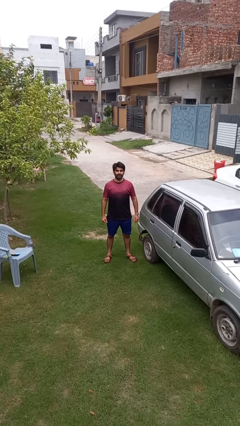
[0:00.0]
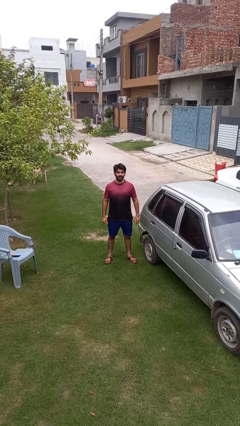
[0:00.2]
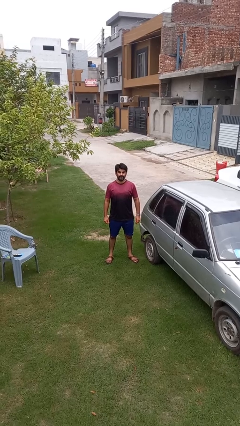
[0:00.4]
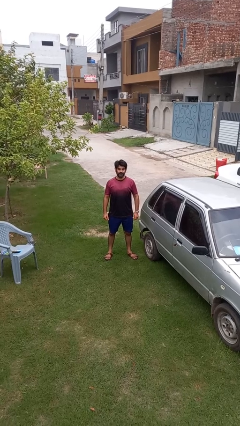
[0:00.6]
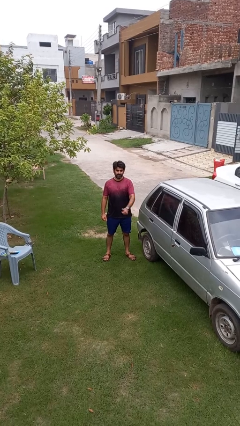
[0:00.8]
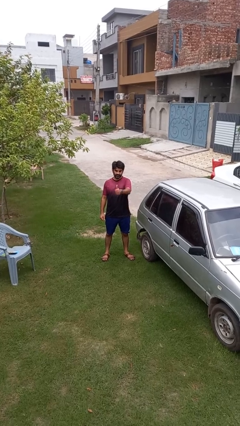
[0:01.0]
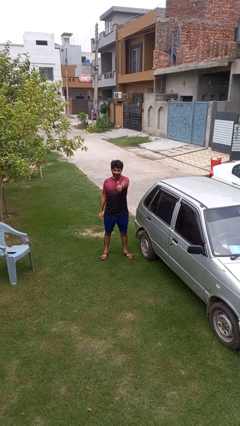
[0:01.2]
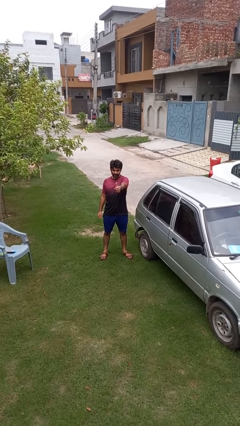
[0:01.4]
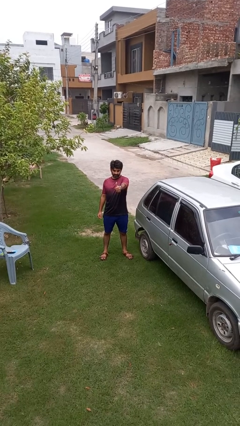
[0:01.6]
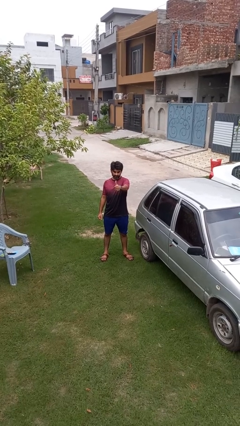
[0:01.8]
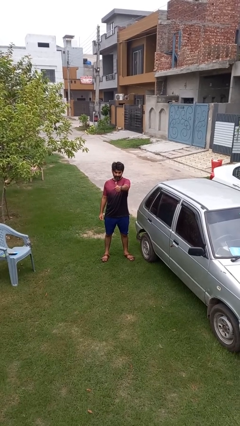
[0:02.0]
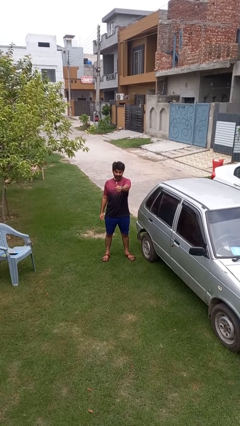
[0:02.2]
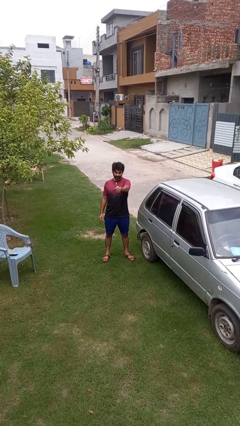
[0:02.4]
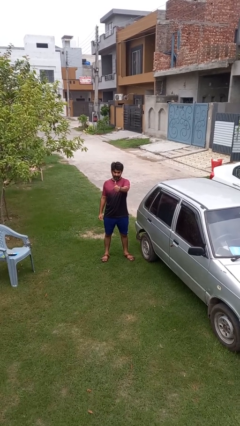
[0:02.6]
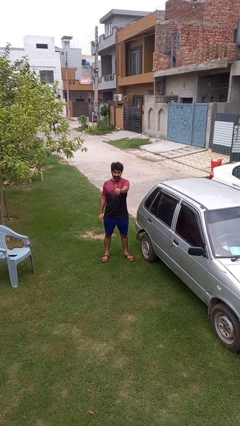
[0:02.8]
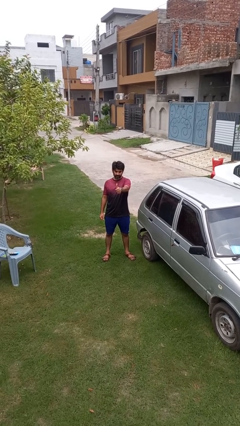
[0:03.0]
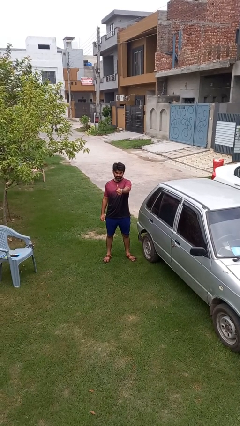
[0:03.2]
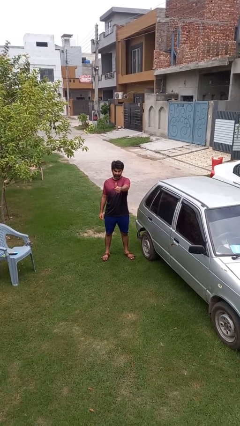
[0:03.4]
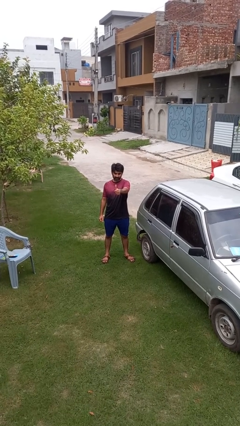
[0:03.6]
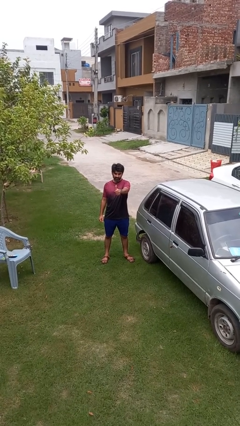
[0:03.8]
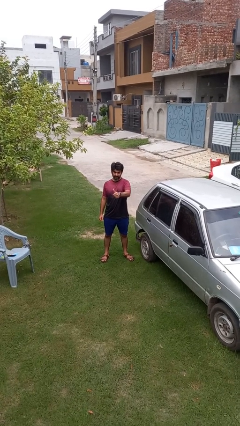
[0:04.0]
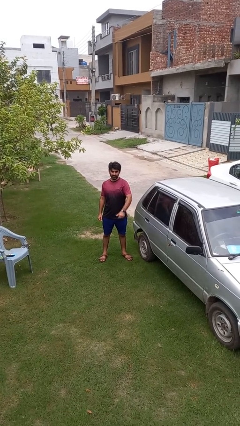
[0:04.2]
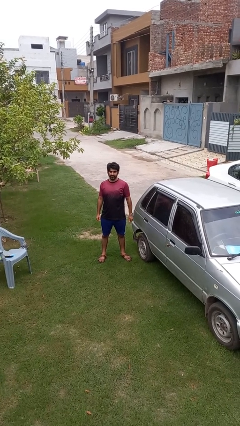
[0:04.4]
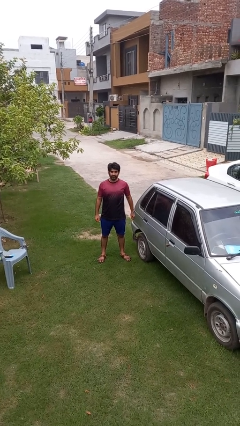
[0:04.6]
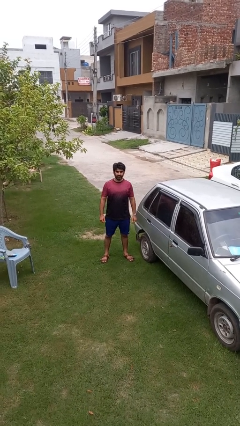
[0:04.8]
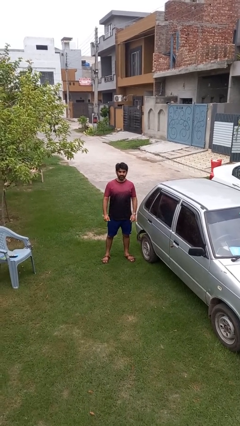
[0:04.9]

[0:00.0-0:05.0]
person gestures thumbs up

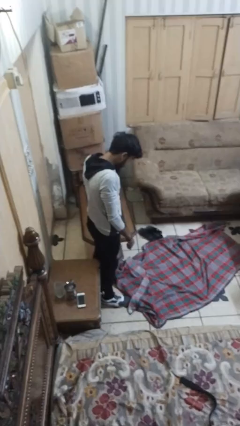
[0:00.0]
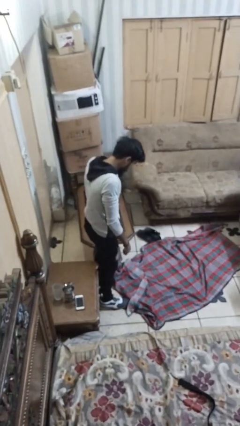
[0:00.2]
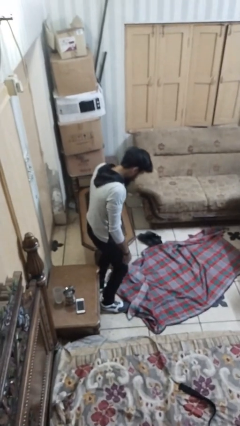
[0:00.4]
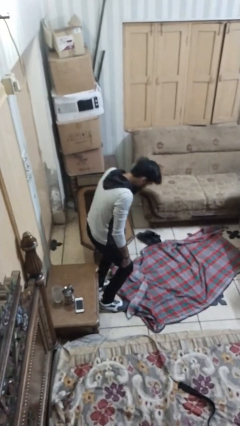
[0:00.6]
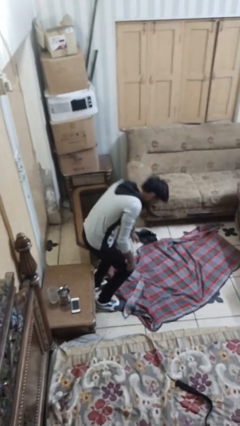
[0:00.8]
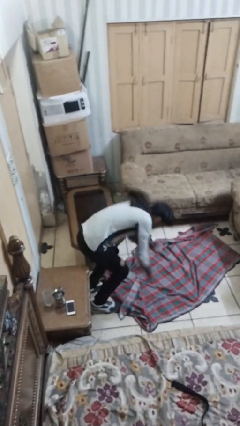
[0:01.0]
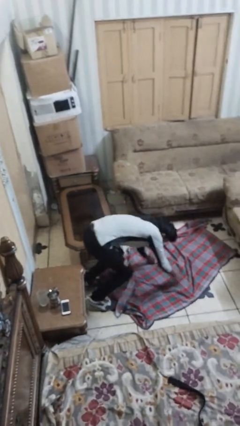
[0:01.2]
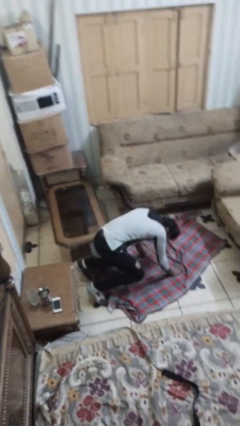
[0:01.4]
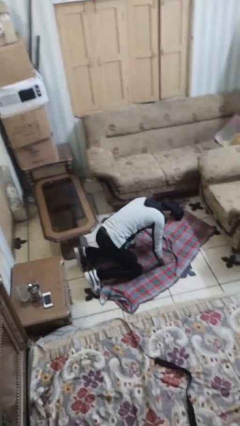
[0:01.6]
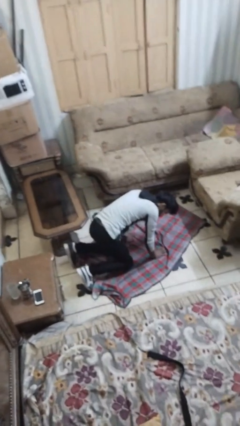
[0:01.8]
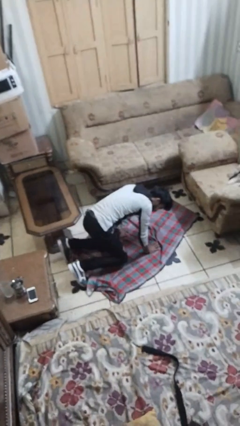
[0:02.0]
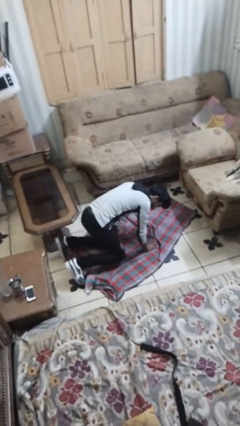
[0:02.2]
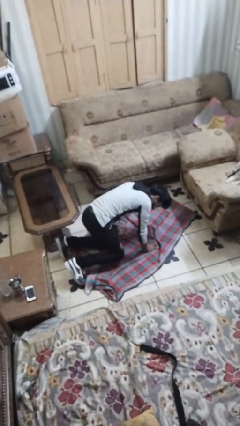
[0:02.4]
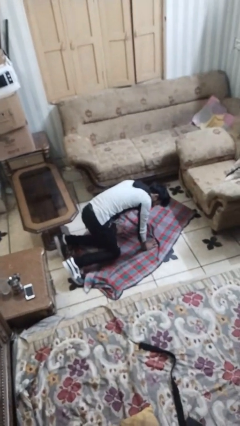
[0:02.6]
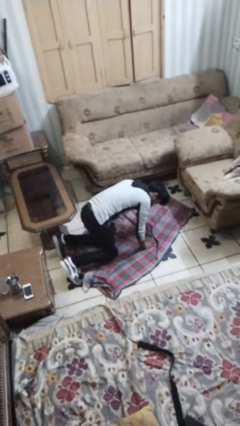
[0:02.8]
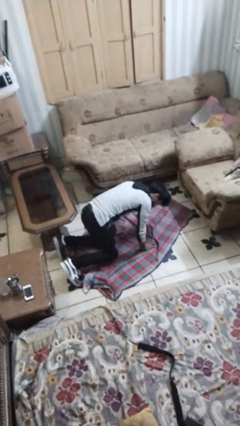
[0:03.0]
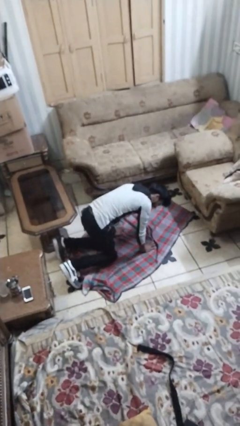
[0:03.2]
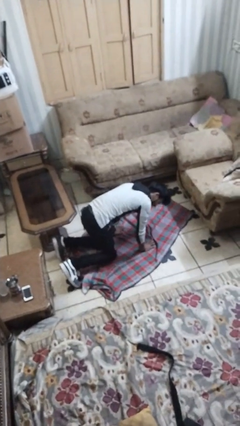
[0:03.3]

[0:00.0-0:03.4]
person trips on object on floor

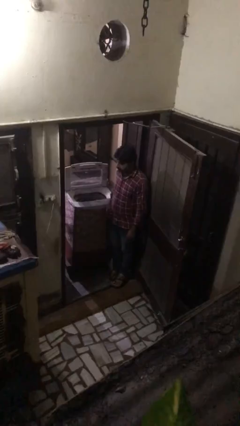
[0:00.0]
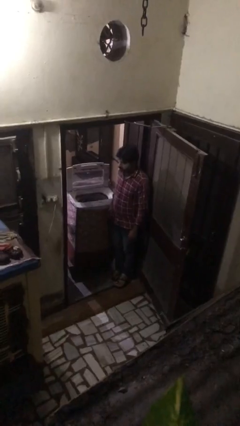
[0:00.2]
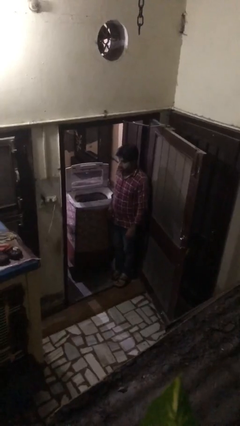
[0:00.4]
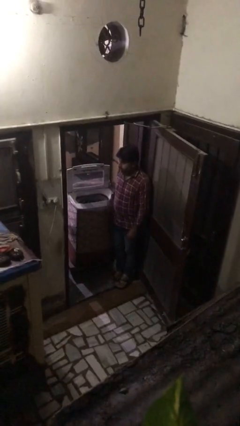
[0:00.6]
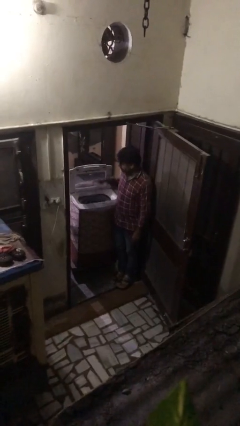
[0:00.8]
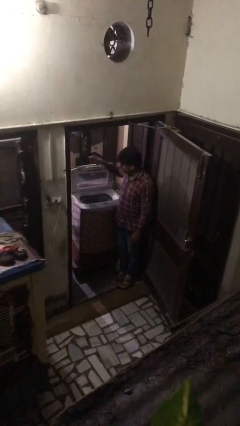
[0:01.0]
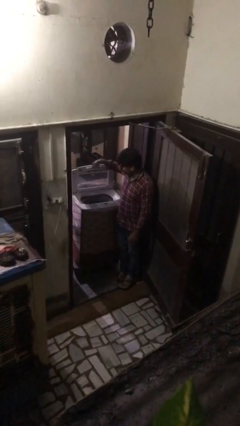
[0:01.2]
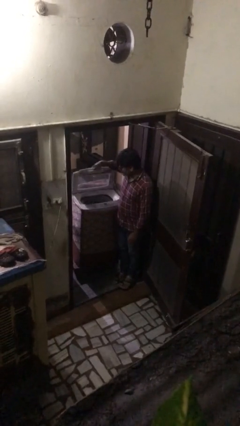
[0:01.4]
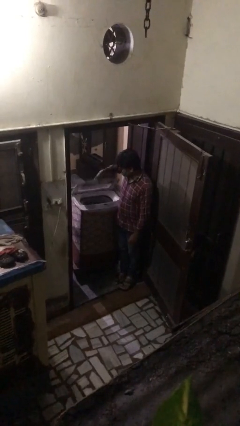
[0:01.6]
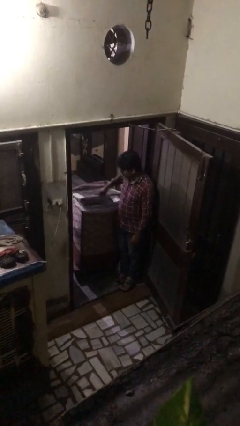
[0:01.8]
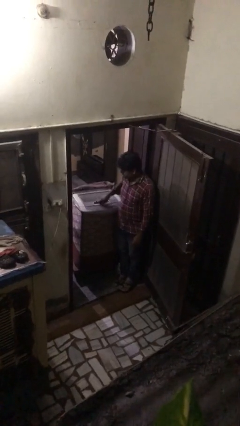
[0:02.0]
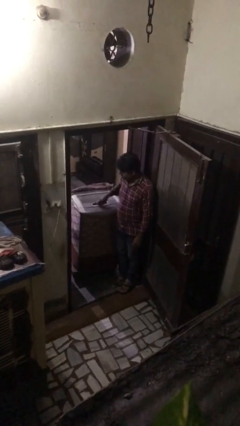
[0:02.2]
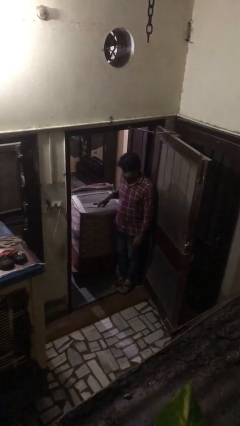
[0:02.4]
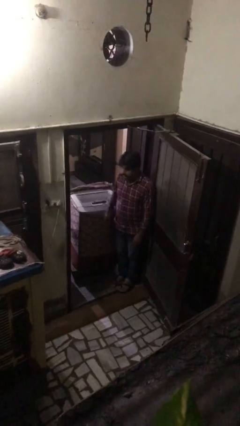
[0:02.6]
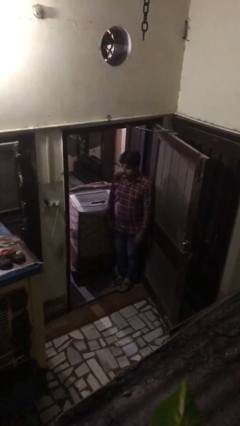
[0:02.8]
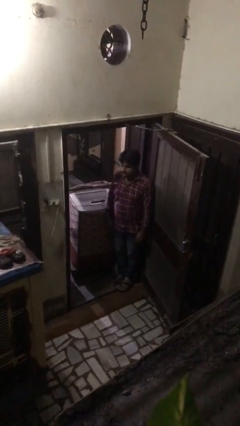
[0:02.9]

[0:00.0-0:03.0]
person closes clothes washer

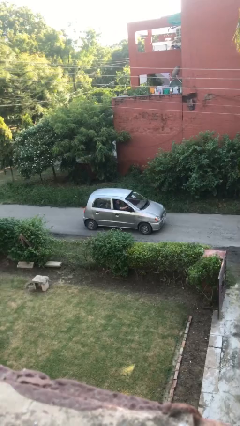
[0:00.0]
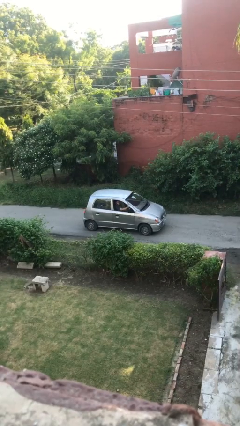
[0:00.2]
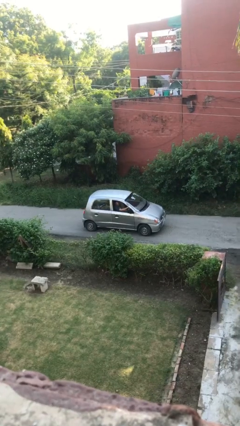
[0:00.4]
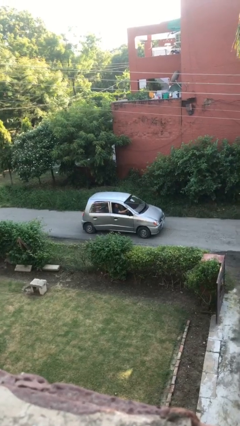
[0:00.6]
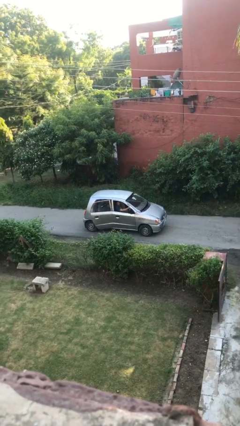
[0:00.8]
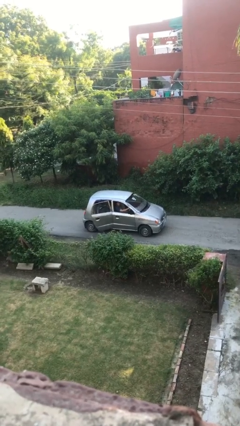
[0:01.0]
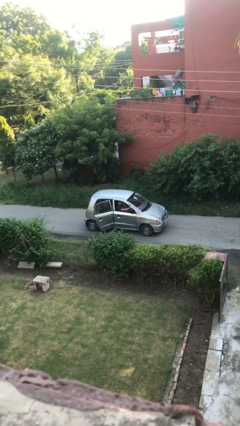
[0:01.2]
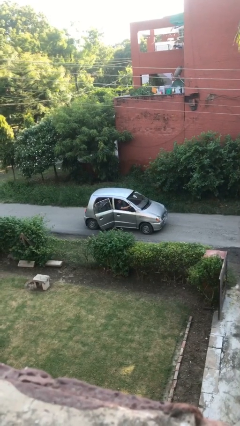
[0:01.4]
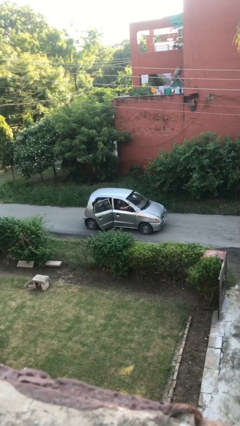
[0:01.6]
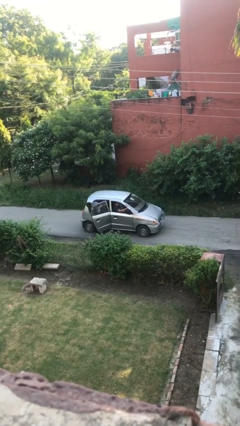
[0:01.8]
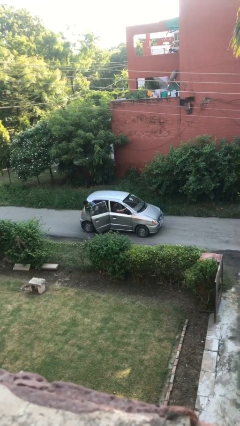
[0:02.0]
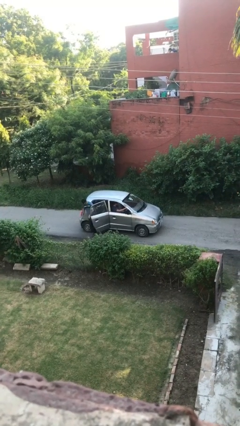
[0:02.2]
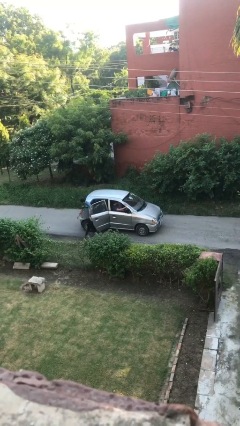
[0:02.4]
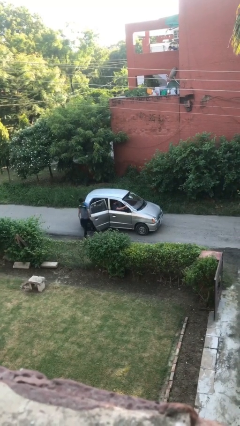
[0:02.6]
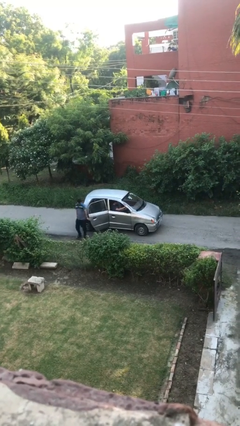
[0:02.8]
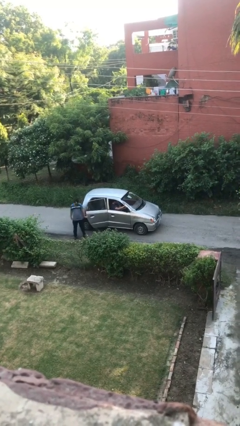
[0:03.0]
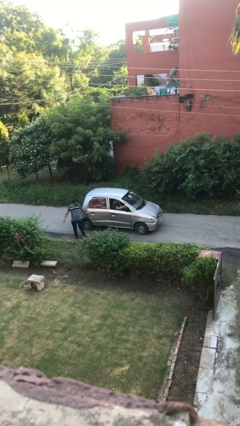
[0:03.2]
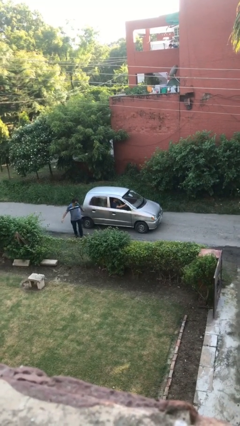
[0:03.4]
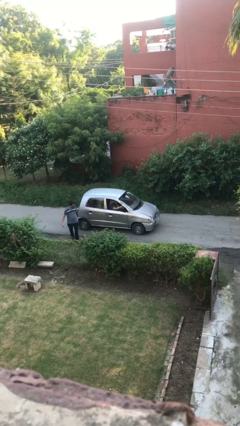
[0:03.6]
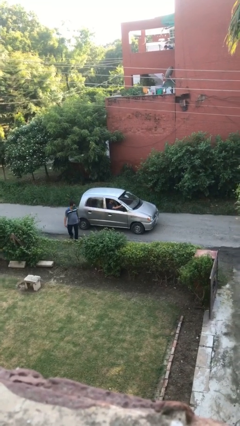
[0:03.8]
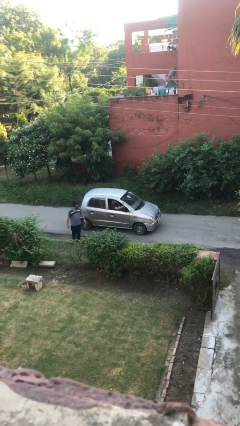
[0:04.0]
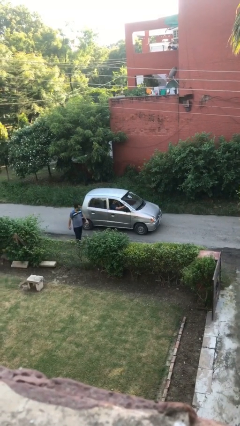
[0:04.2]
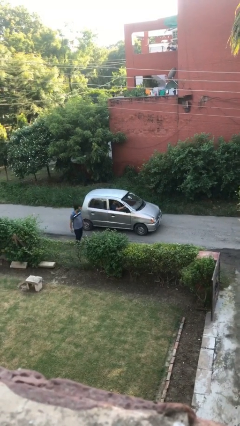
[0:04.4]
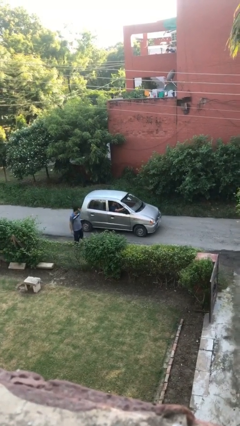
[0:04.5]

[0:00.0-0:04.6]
car drops off person

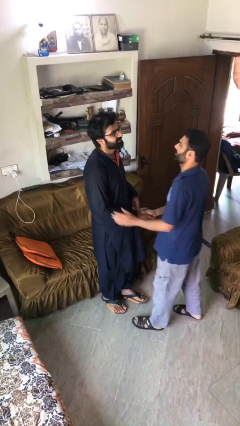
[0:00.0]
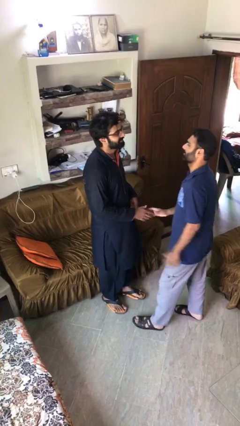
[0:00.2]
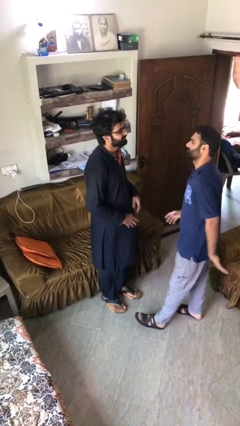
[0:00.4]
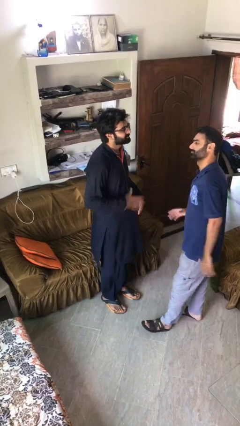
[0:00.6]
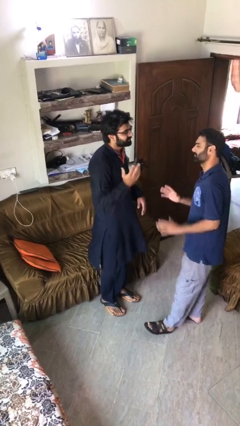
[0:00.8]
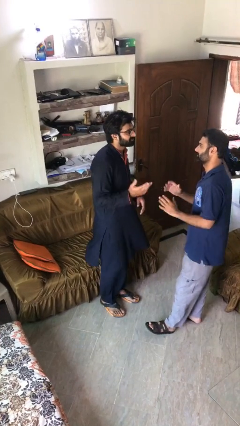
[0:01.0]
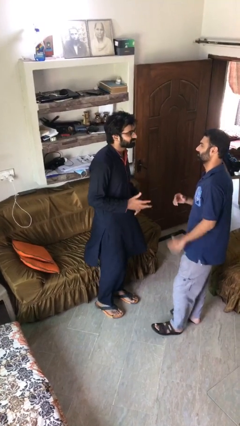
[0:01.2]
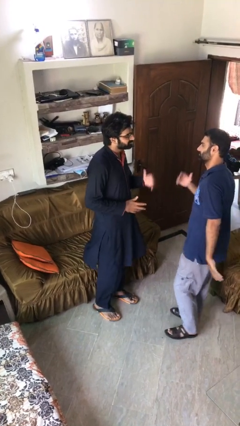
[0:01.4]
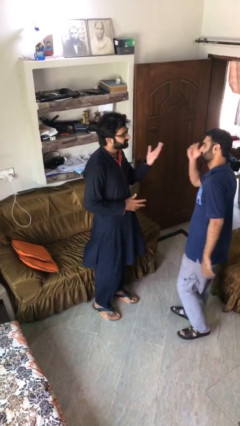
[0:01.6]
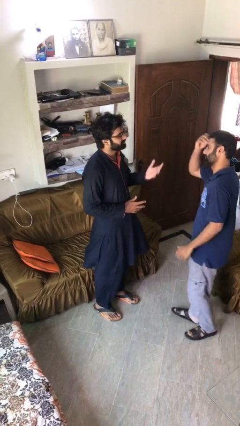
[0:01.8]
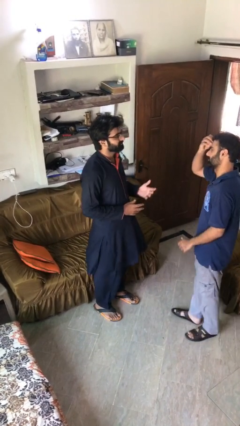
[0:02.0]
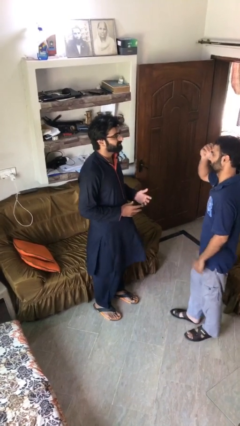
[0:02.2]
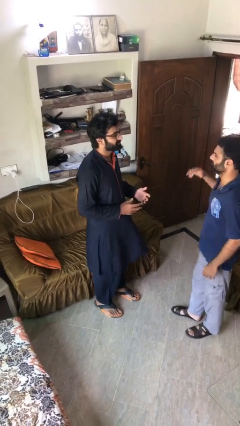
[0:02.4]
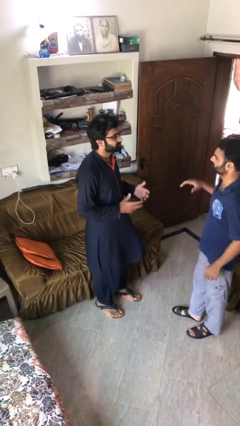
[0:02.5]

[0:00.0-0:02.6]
person talks to person
